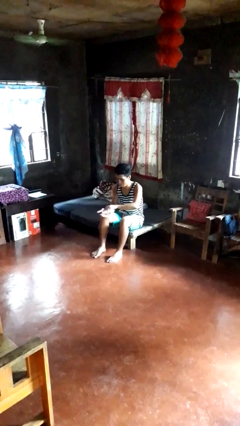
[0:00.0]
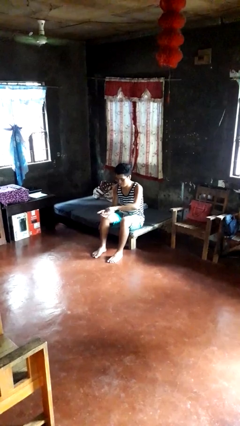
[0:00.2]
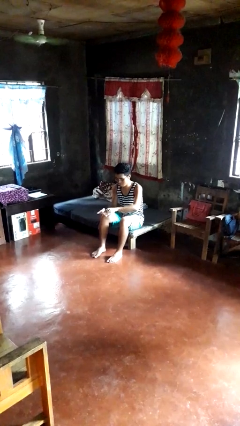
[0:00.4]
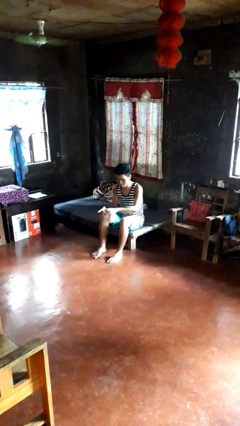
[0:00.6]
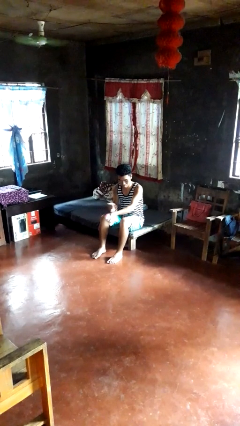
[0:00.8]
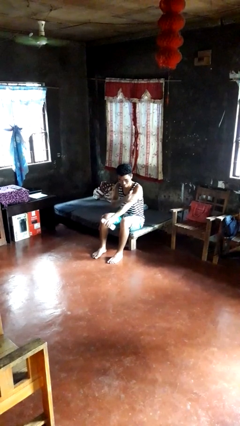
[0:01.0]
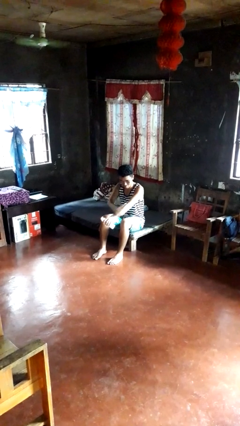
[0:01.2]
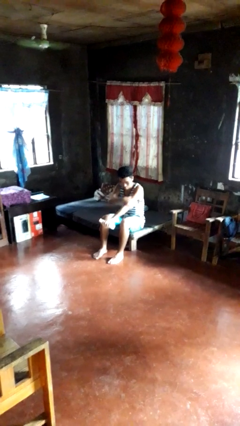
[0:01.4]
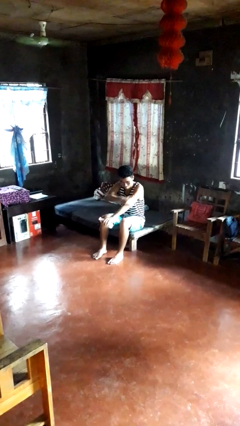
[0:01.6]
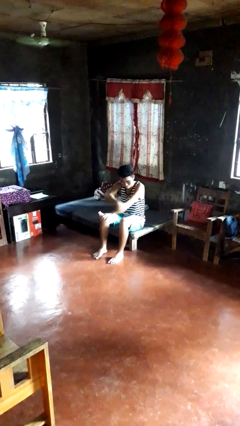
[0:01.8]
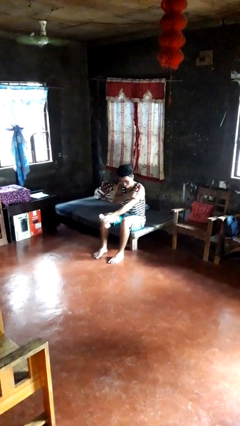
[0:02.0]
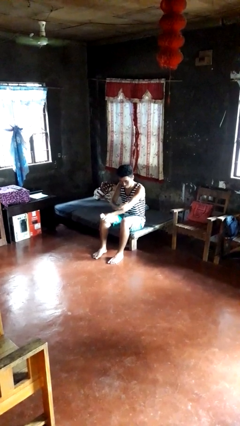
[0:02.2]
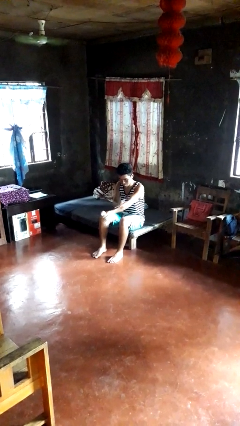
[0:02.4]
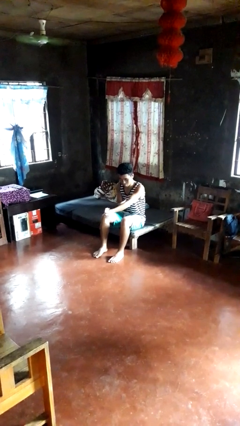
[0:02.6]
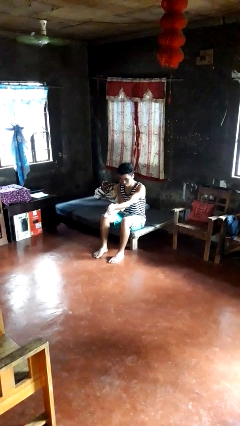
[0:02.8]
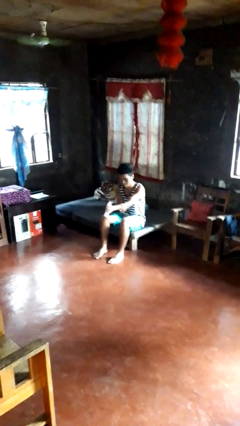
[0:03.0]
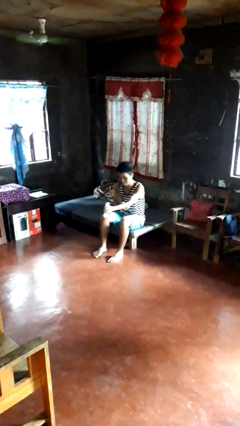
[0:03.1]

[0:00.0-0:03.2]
person applies sunscreen

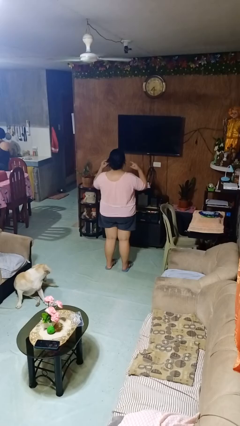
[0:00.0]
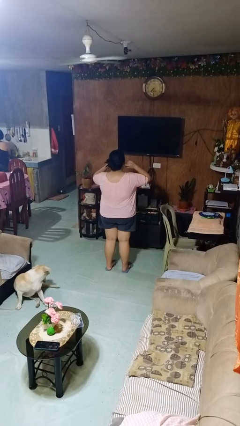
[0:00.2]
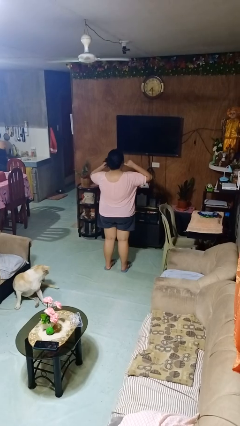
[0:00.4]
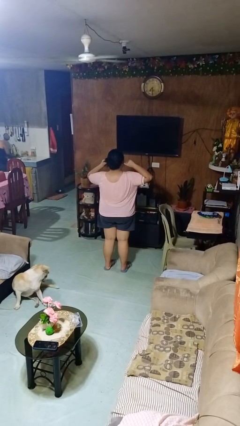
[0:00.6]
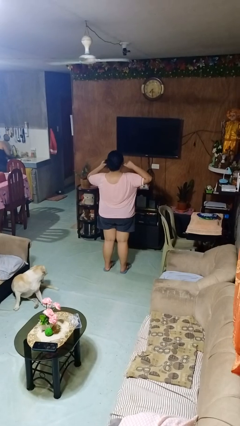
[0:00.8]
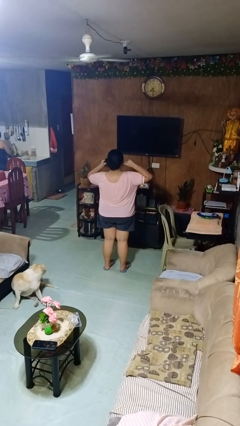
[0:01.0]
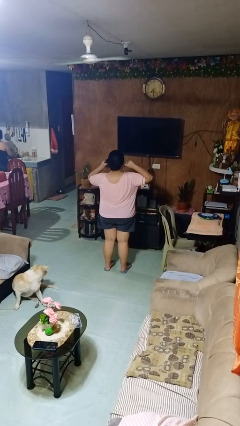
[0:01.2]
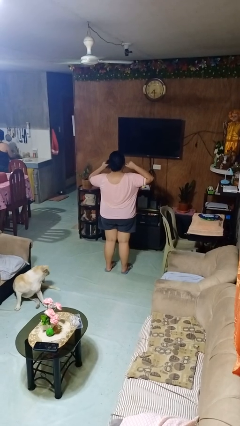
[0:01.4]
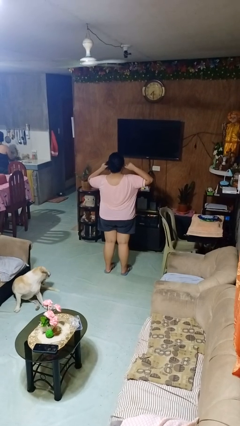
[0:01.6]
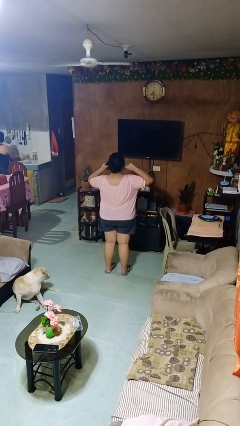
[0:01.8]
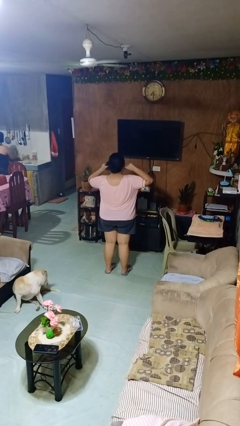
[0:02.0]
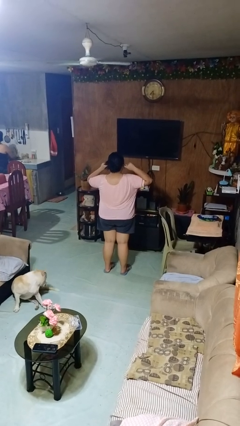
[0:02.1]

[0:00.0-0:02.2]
person puts fingers in ear

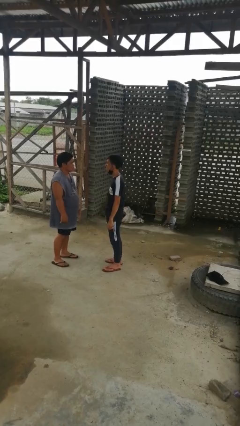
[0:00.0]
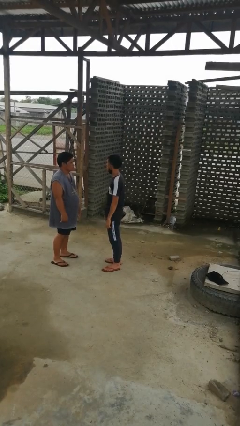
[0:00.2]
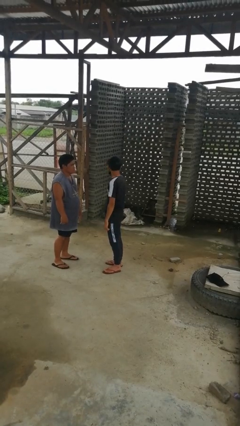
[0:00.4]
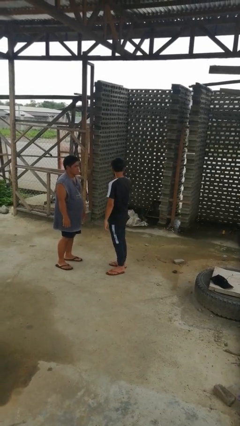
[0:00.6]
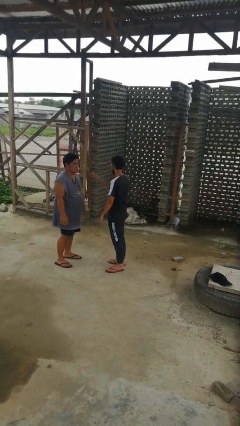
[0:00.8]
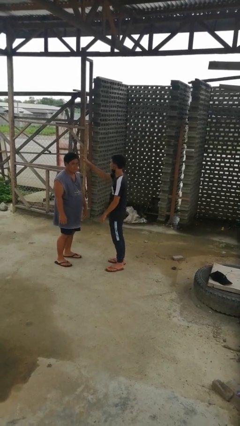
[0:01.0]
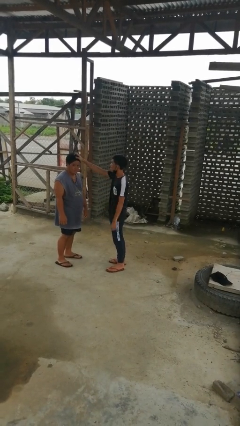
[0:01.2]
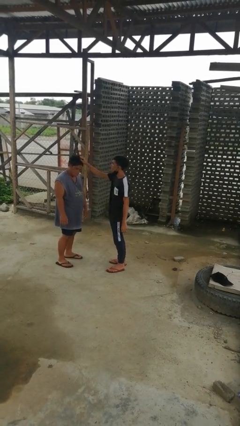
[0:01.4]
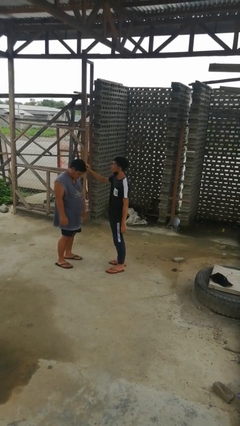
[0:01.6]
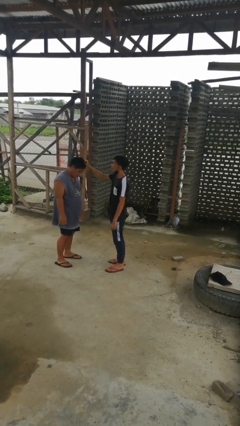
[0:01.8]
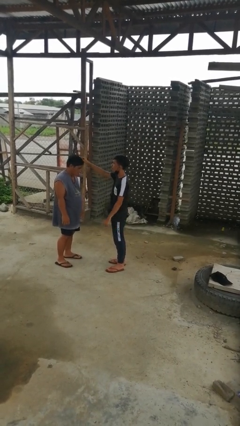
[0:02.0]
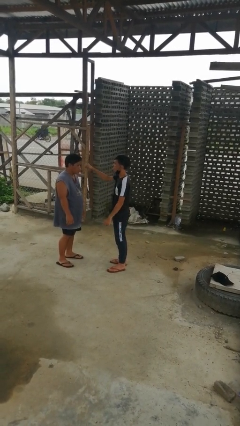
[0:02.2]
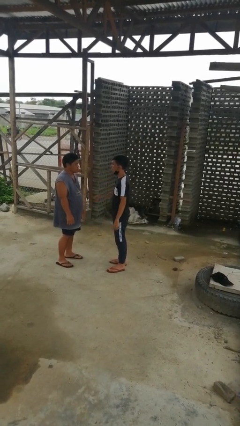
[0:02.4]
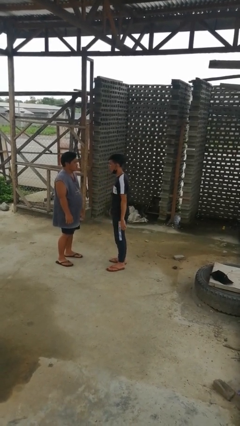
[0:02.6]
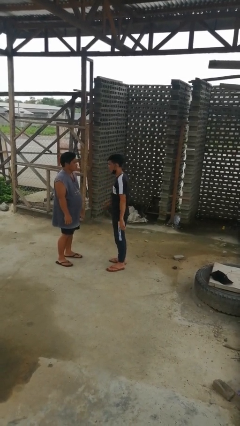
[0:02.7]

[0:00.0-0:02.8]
person grabs person by hair

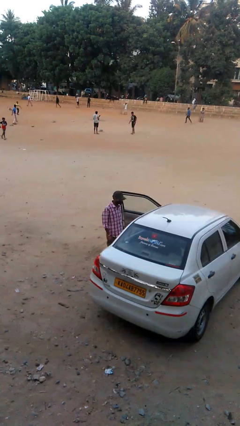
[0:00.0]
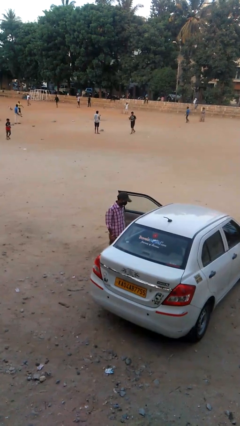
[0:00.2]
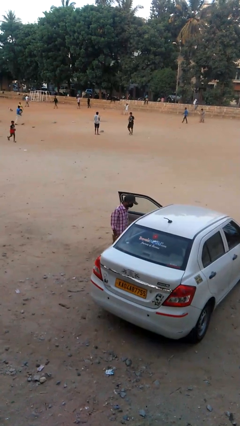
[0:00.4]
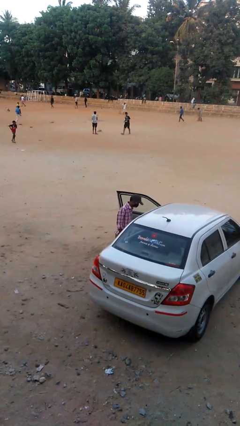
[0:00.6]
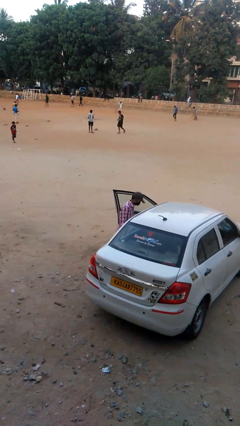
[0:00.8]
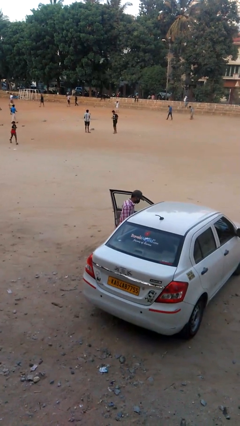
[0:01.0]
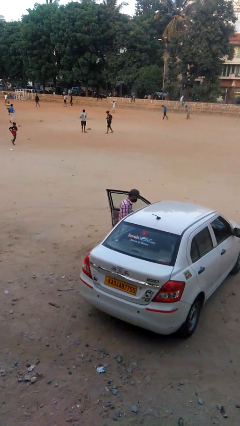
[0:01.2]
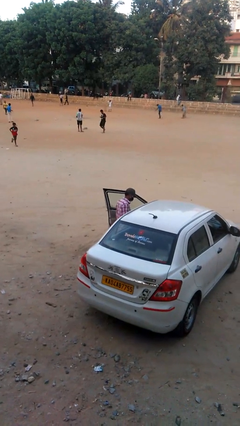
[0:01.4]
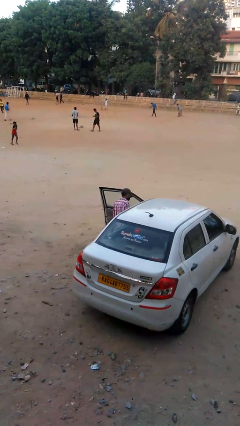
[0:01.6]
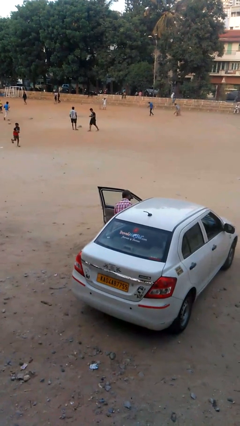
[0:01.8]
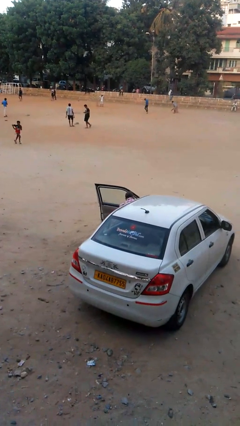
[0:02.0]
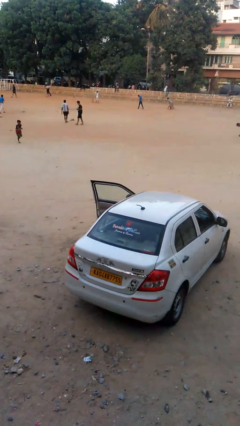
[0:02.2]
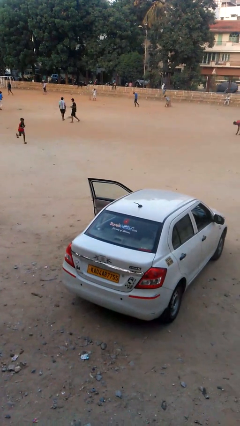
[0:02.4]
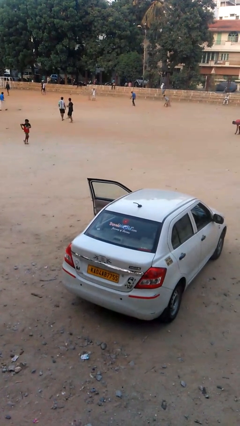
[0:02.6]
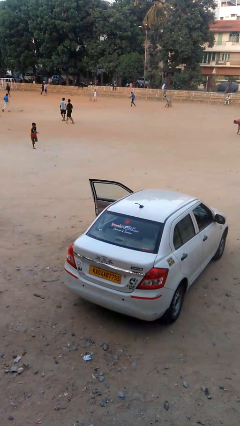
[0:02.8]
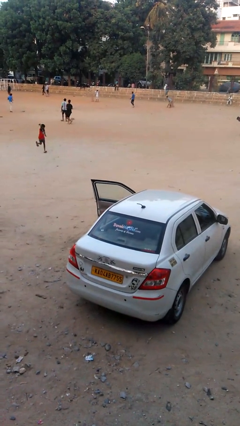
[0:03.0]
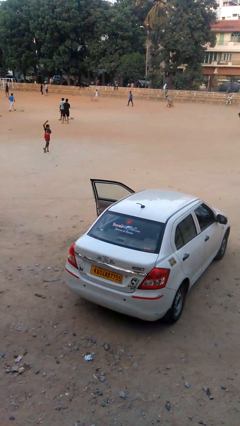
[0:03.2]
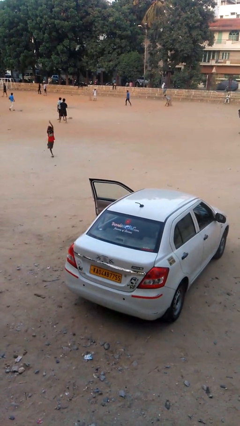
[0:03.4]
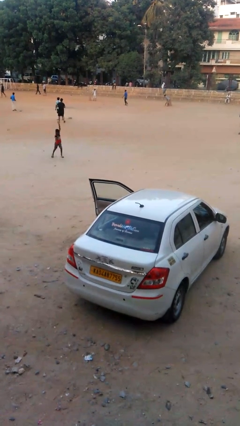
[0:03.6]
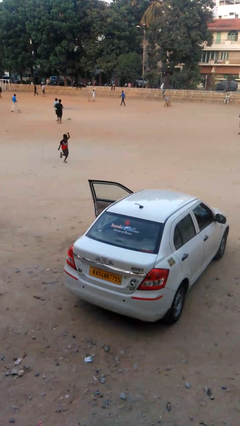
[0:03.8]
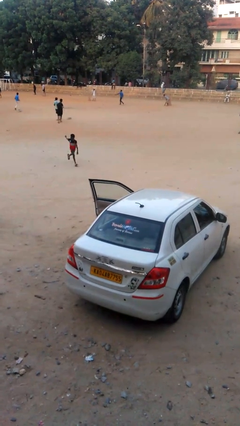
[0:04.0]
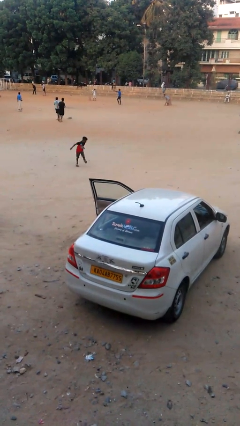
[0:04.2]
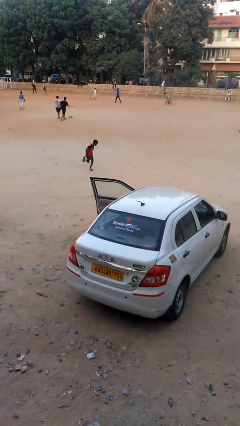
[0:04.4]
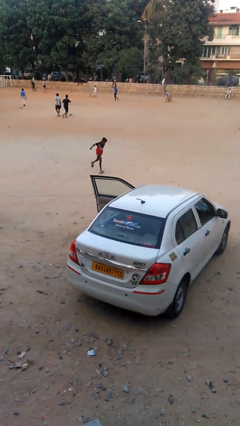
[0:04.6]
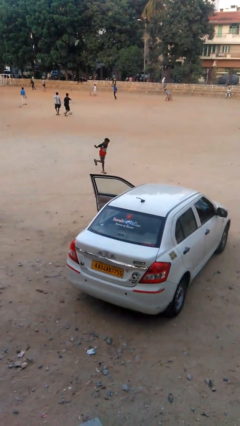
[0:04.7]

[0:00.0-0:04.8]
person enters car

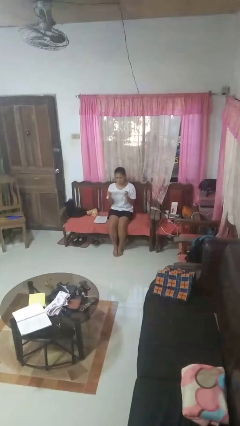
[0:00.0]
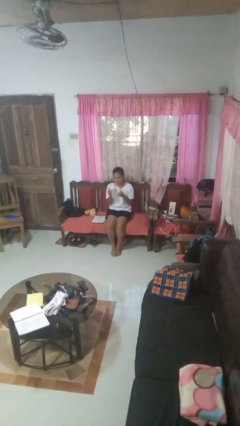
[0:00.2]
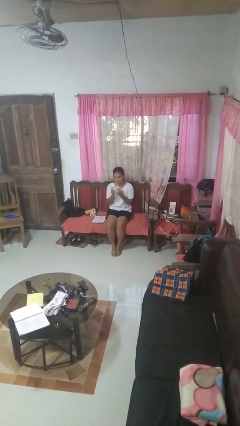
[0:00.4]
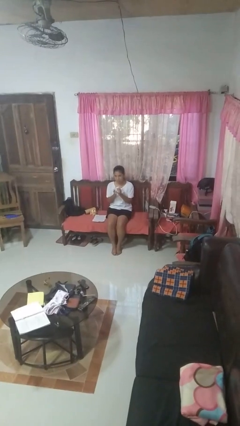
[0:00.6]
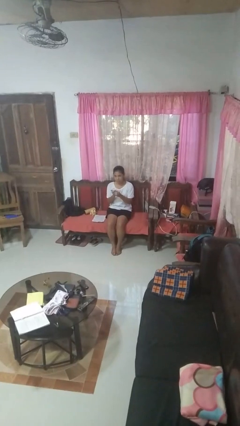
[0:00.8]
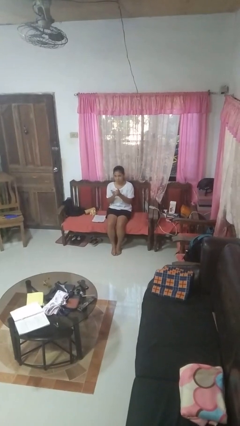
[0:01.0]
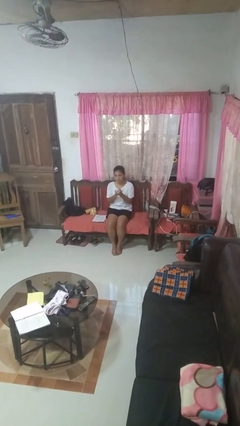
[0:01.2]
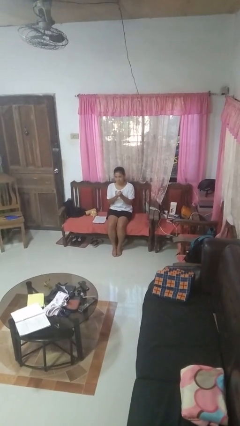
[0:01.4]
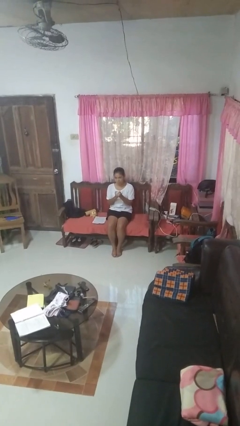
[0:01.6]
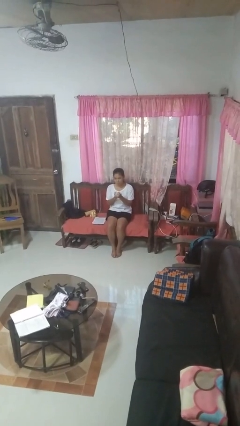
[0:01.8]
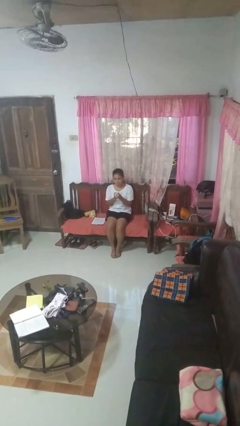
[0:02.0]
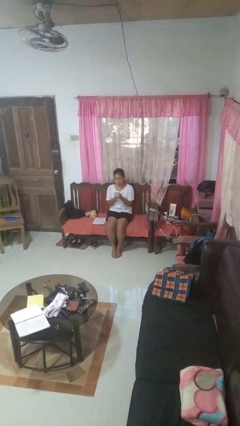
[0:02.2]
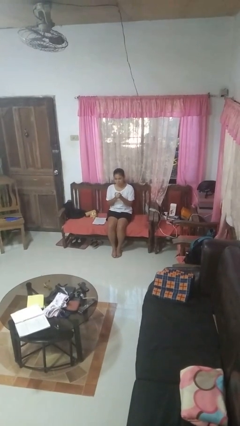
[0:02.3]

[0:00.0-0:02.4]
person crumples paper

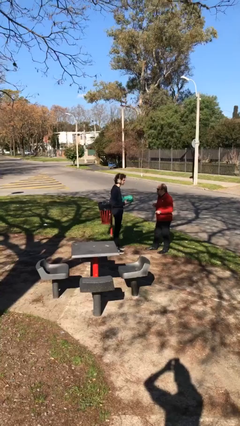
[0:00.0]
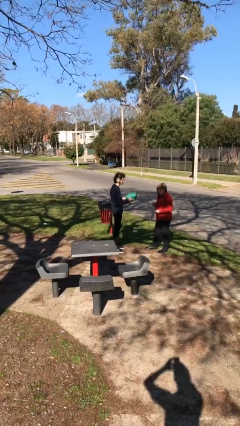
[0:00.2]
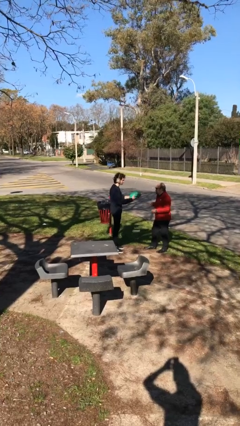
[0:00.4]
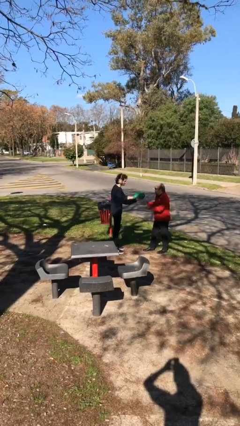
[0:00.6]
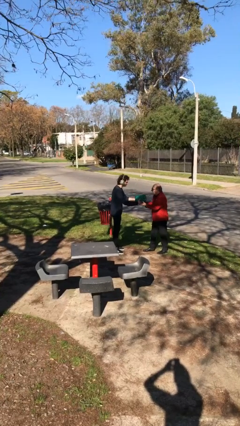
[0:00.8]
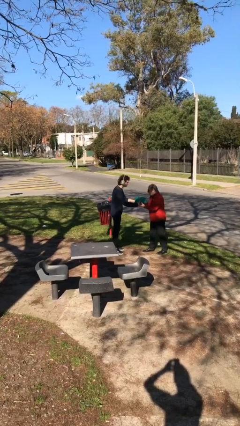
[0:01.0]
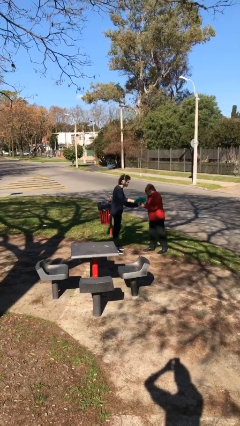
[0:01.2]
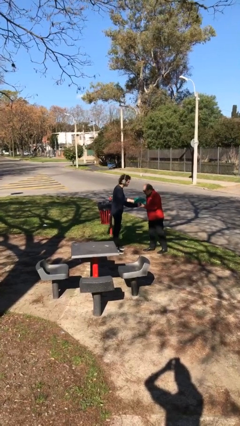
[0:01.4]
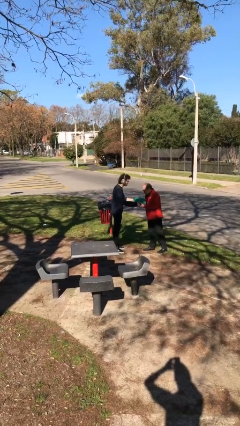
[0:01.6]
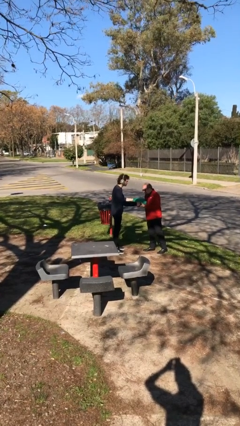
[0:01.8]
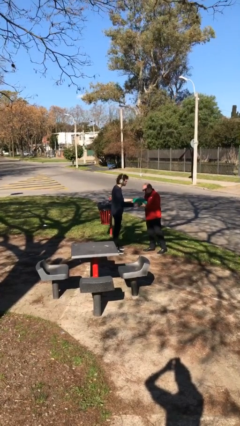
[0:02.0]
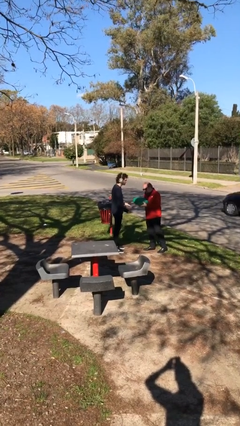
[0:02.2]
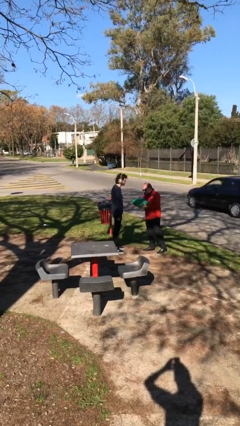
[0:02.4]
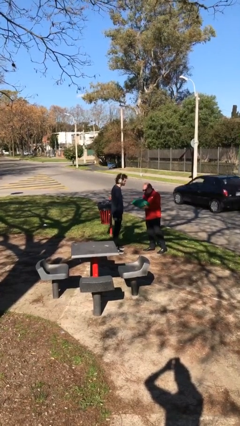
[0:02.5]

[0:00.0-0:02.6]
person transfers object to person
